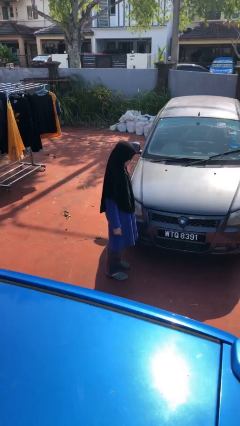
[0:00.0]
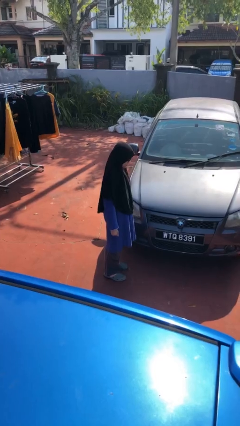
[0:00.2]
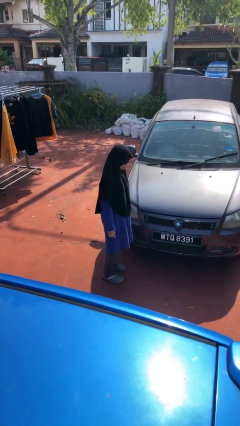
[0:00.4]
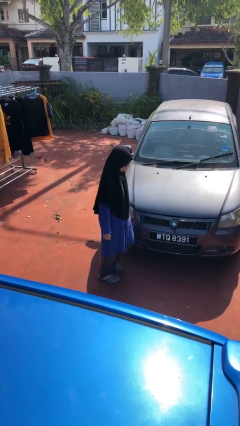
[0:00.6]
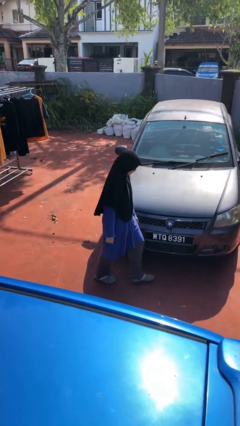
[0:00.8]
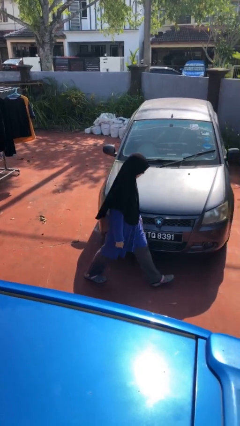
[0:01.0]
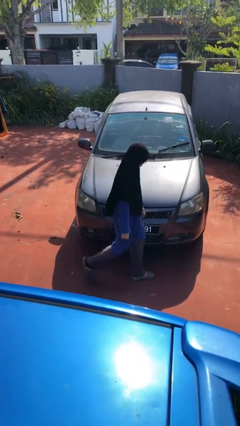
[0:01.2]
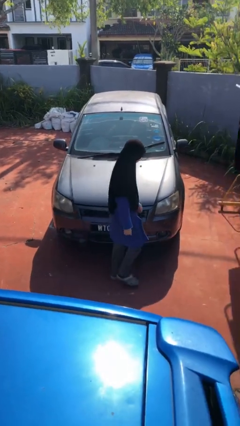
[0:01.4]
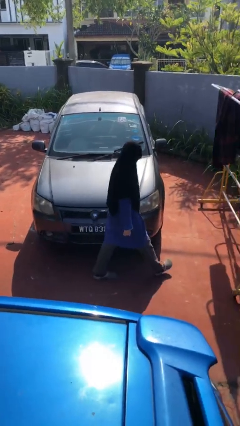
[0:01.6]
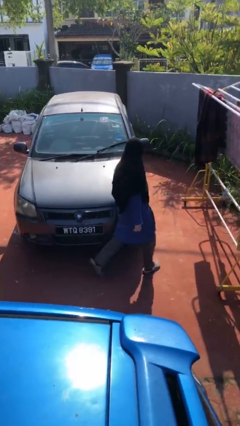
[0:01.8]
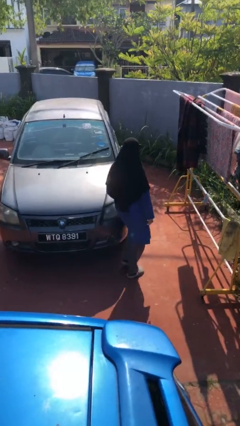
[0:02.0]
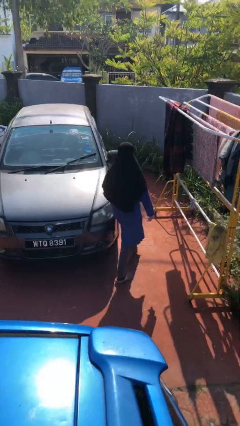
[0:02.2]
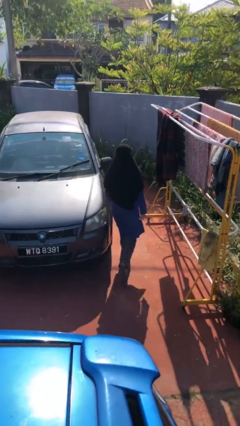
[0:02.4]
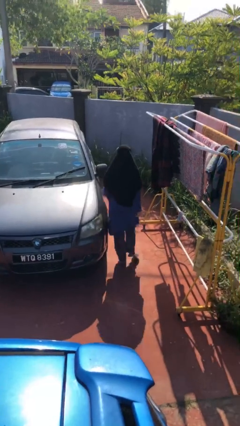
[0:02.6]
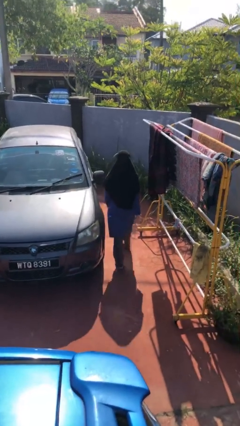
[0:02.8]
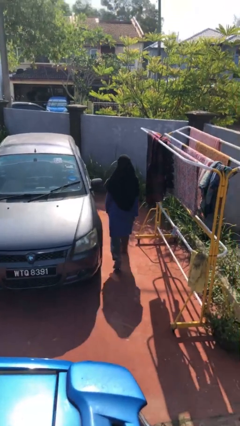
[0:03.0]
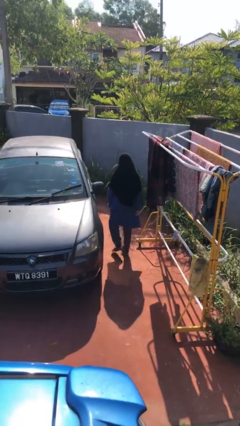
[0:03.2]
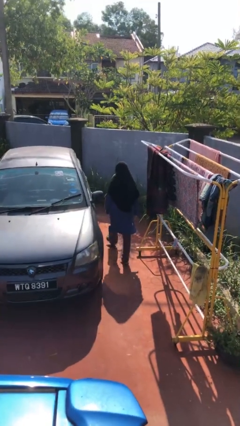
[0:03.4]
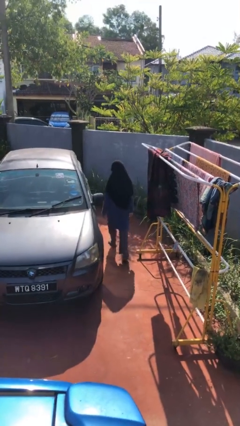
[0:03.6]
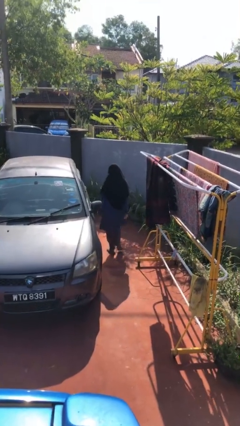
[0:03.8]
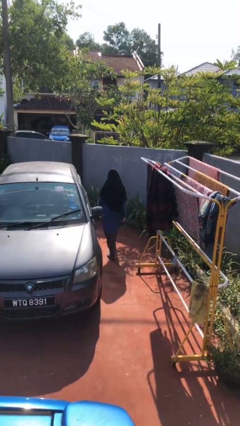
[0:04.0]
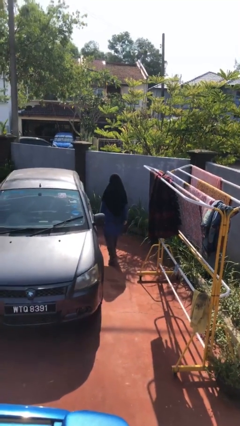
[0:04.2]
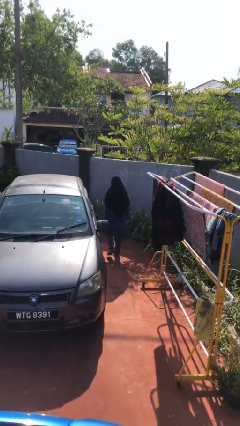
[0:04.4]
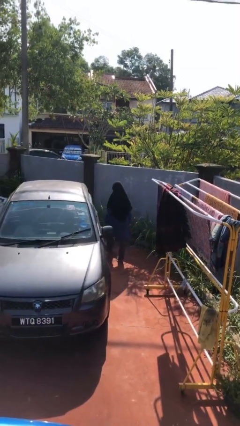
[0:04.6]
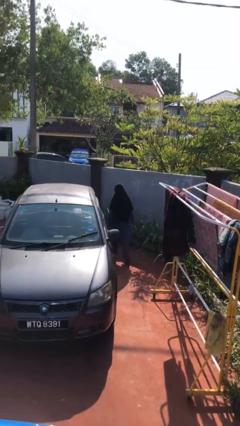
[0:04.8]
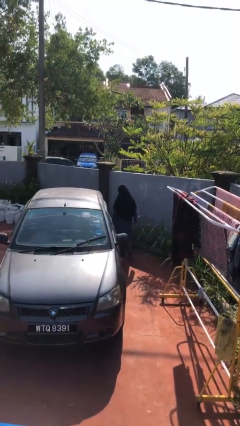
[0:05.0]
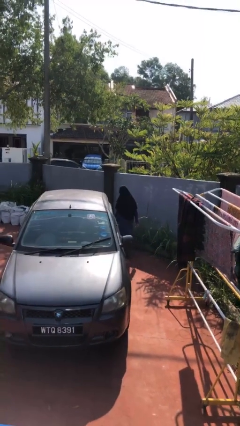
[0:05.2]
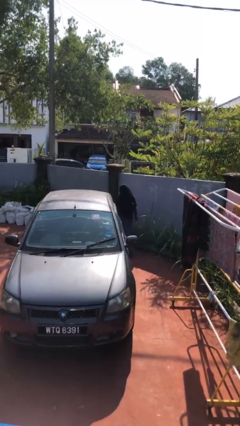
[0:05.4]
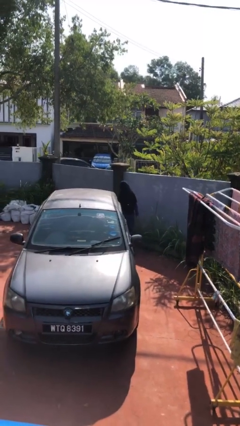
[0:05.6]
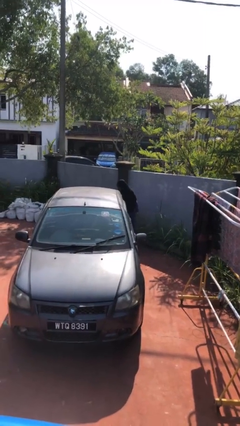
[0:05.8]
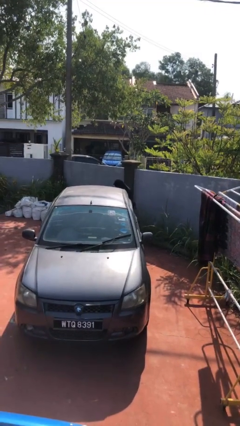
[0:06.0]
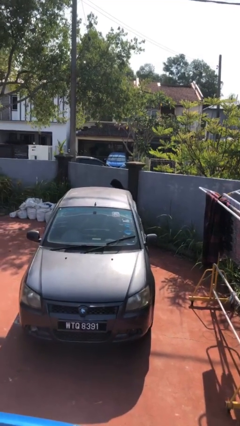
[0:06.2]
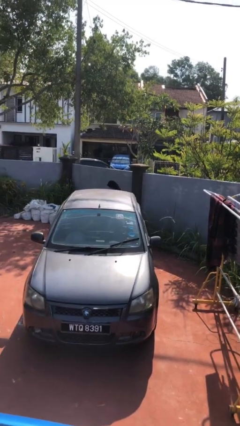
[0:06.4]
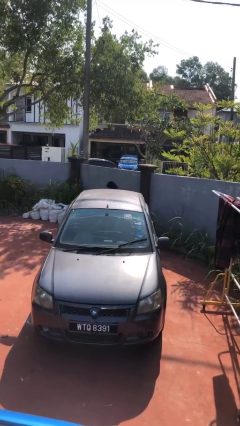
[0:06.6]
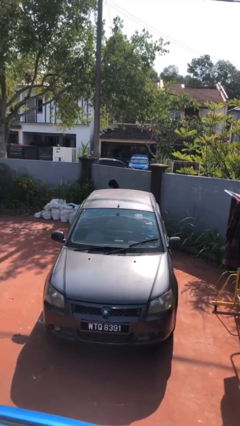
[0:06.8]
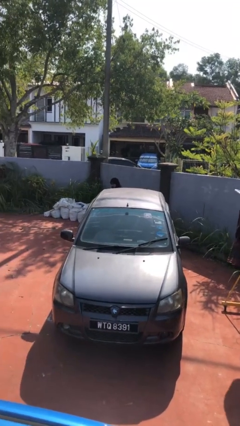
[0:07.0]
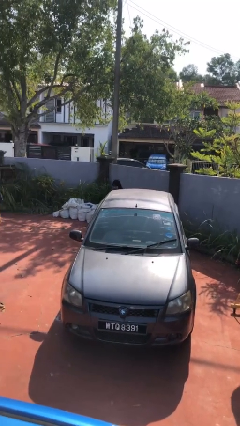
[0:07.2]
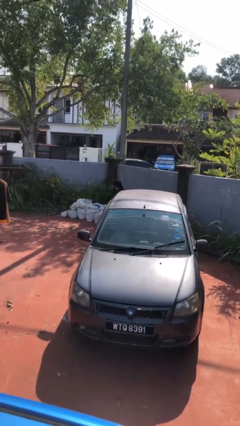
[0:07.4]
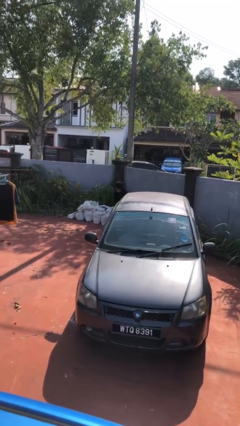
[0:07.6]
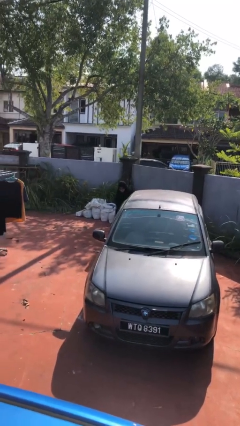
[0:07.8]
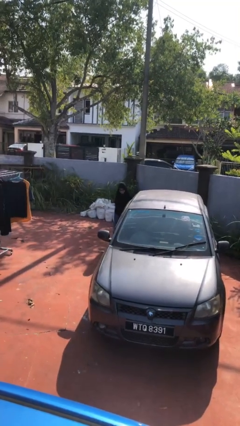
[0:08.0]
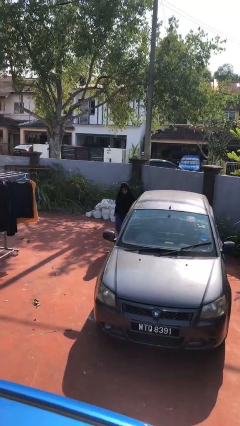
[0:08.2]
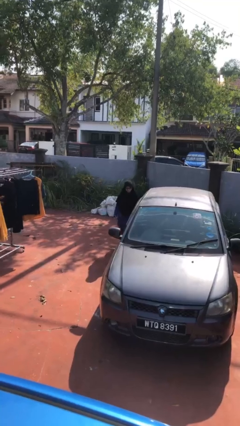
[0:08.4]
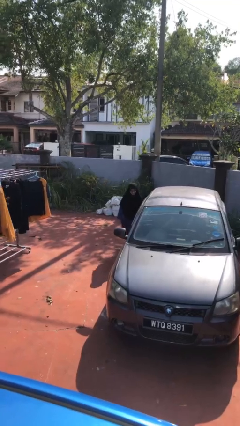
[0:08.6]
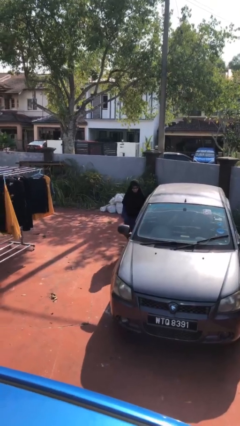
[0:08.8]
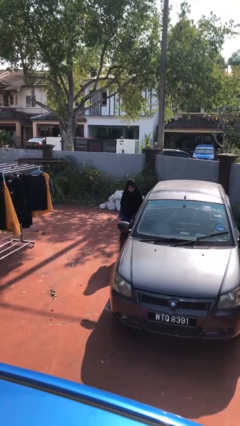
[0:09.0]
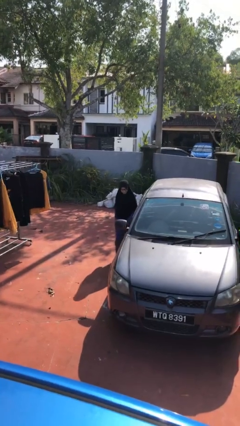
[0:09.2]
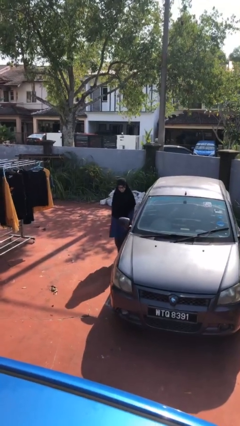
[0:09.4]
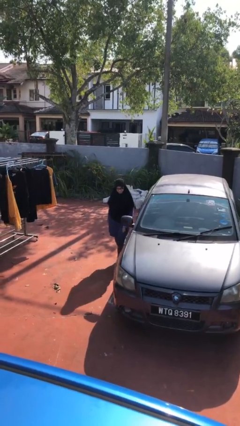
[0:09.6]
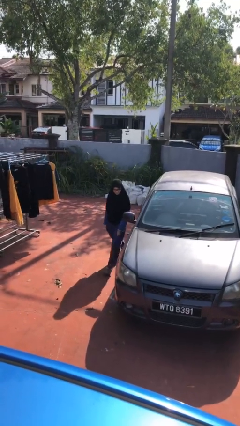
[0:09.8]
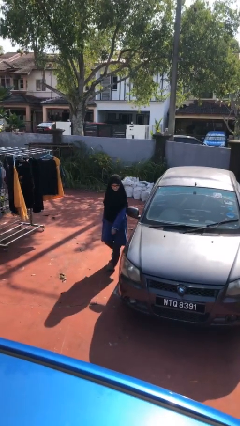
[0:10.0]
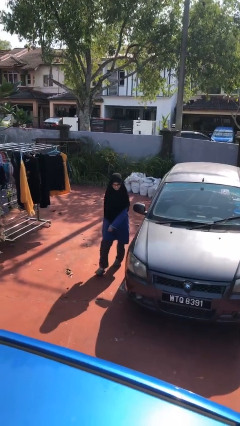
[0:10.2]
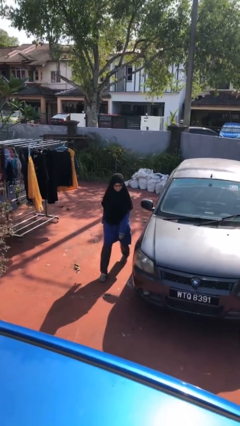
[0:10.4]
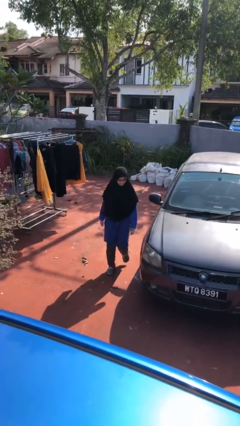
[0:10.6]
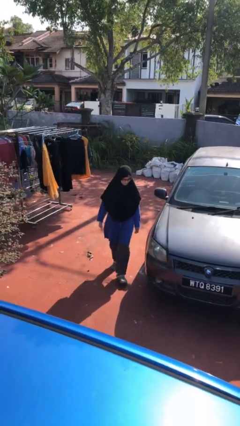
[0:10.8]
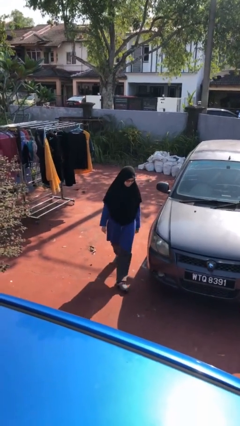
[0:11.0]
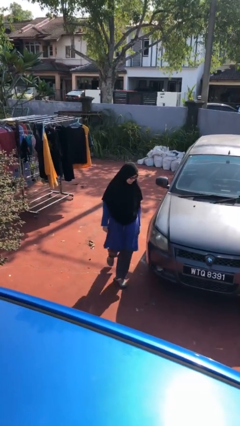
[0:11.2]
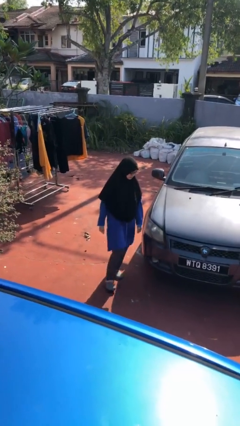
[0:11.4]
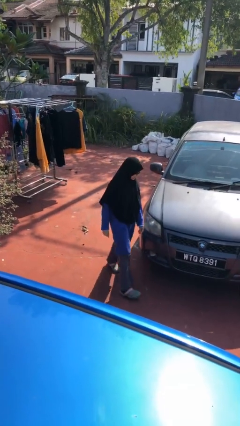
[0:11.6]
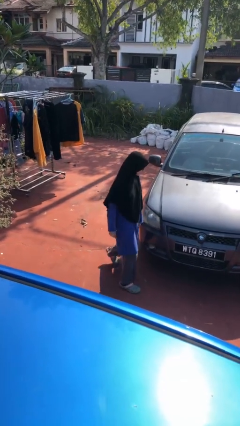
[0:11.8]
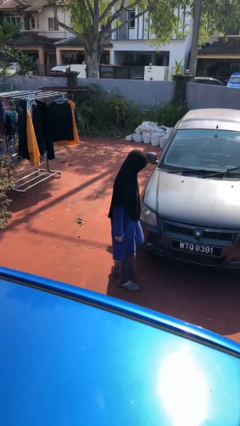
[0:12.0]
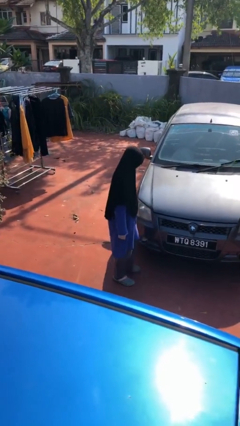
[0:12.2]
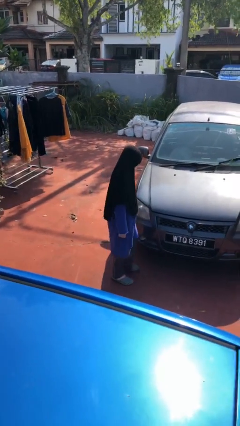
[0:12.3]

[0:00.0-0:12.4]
person walks around car

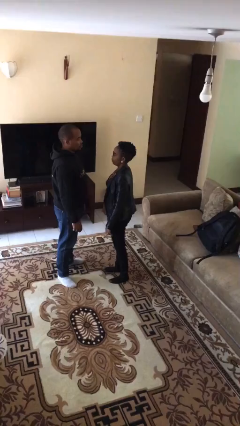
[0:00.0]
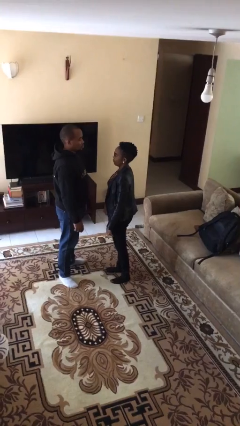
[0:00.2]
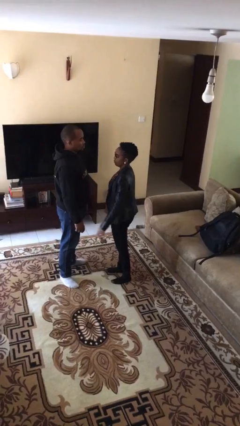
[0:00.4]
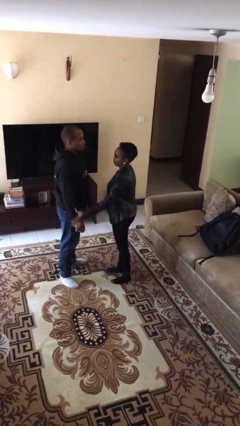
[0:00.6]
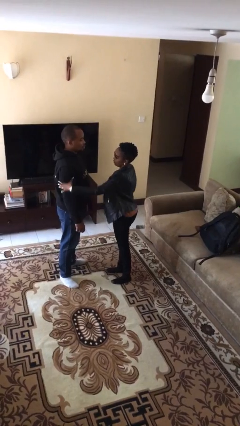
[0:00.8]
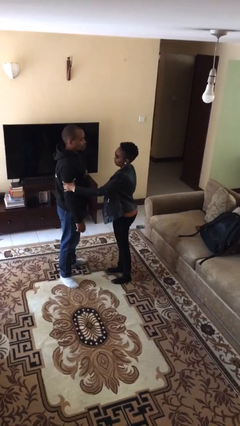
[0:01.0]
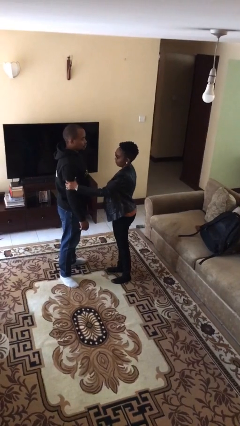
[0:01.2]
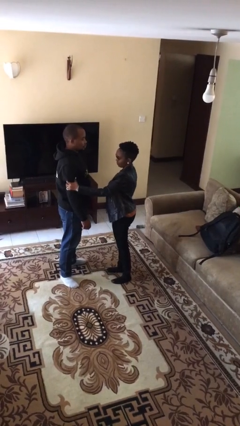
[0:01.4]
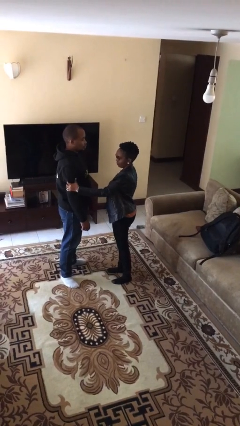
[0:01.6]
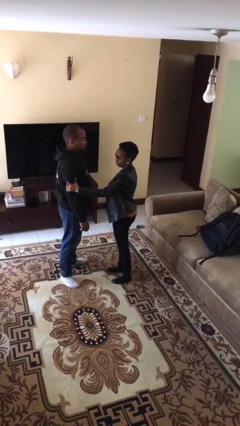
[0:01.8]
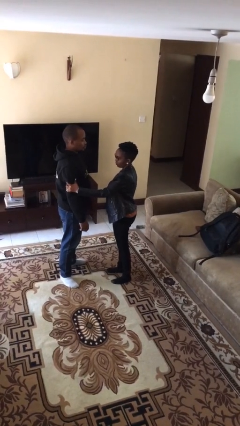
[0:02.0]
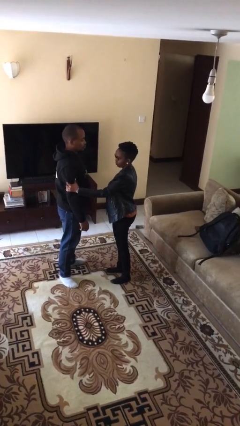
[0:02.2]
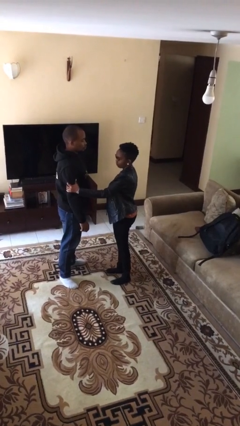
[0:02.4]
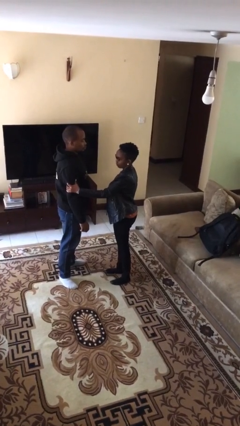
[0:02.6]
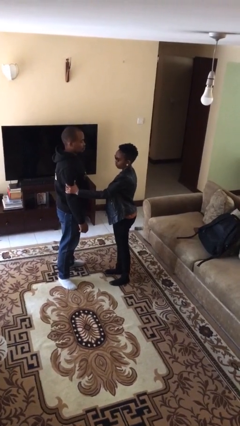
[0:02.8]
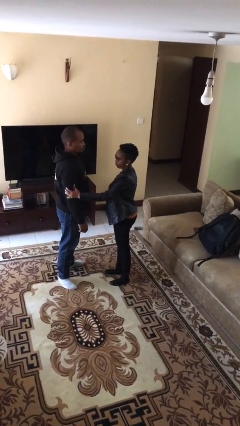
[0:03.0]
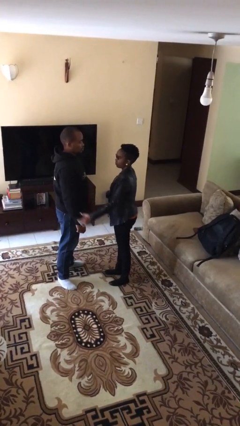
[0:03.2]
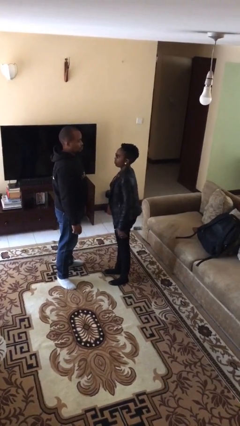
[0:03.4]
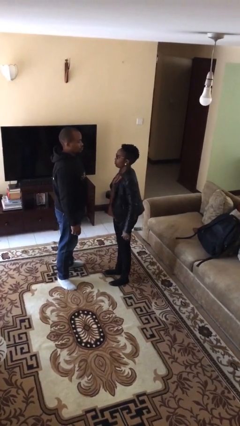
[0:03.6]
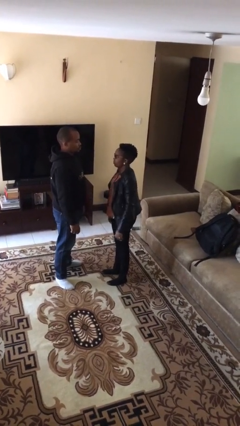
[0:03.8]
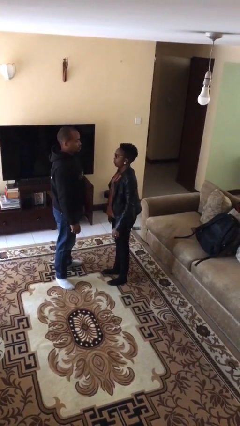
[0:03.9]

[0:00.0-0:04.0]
person grabs person by bicep

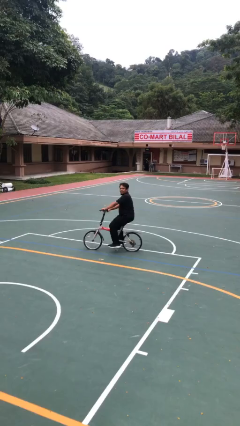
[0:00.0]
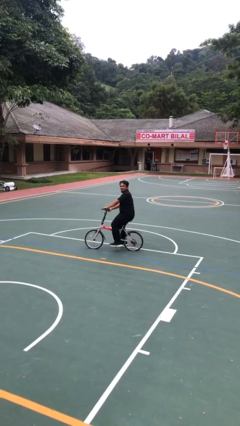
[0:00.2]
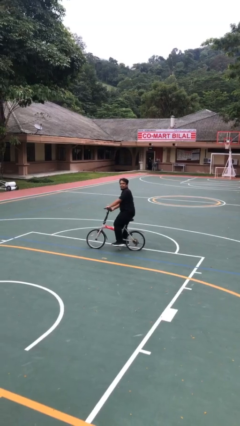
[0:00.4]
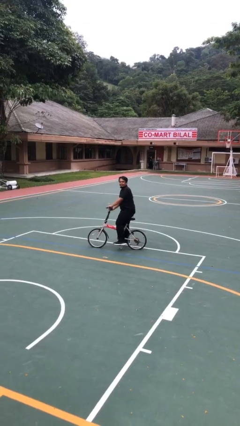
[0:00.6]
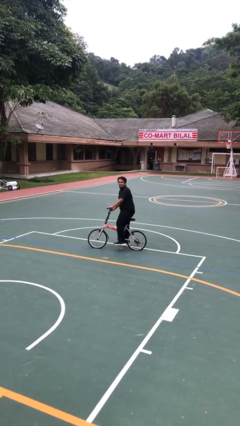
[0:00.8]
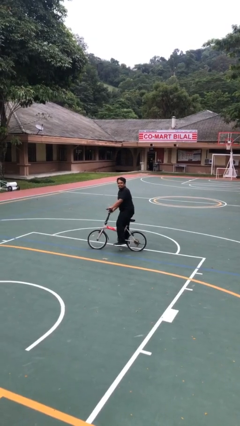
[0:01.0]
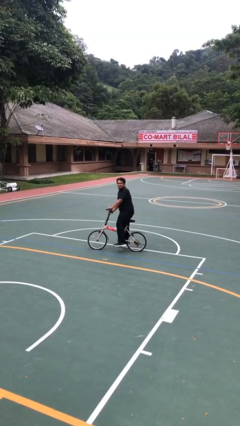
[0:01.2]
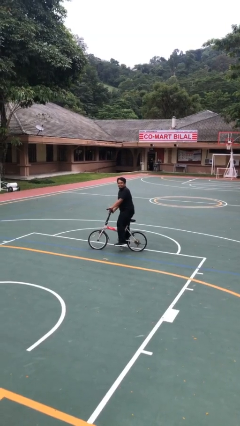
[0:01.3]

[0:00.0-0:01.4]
person rides bicycle
